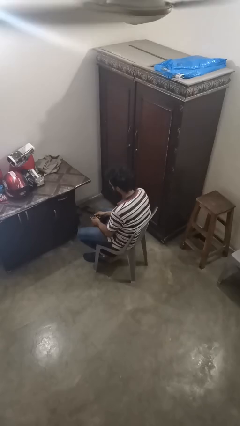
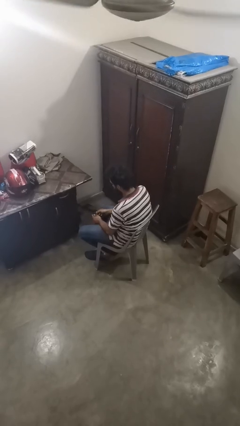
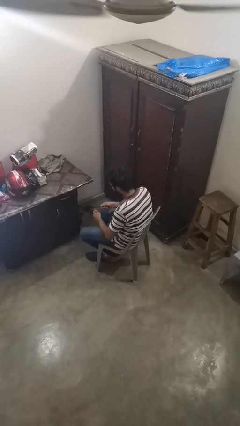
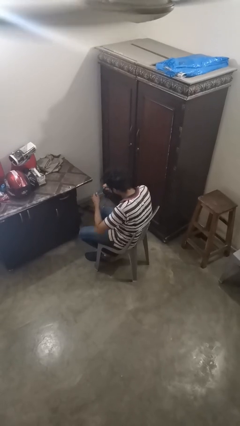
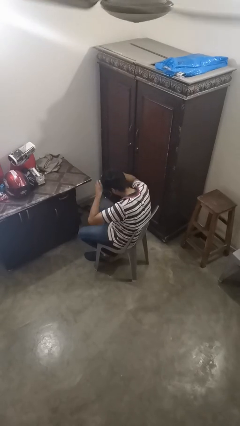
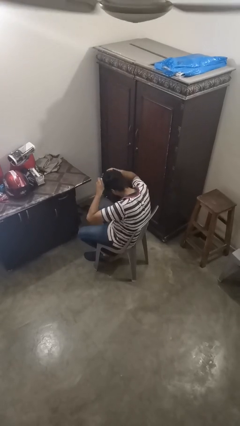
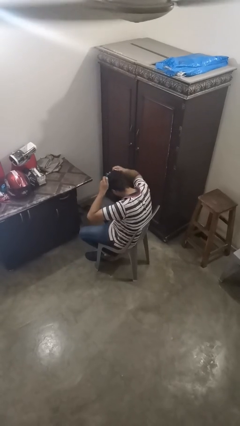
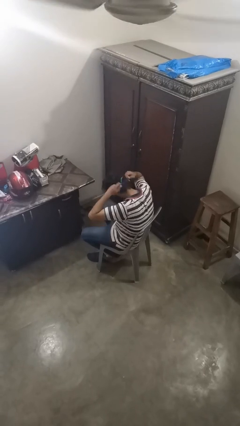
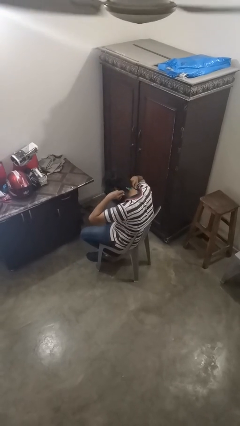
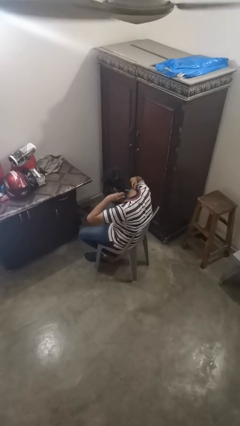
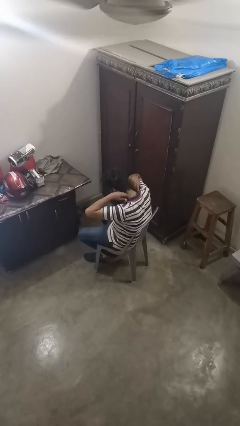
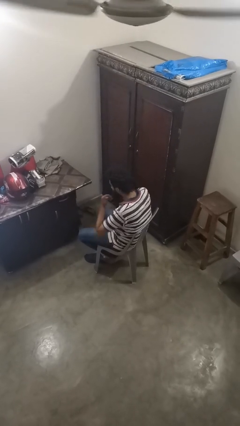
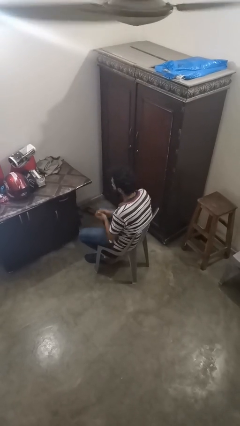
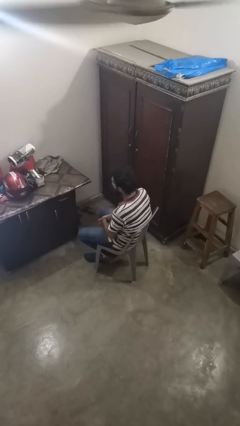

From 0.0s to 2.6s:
person puts on necklace

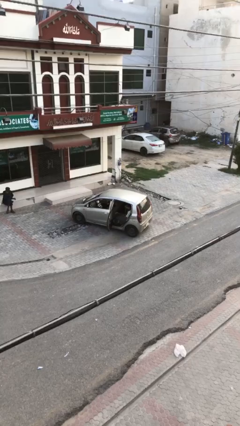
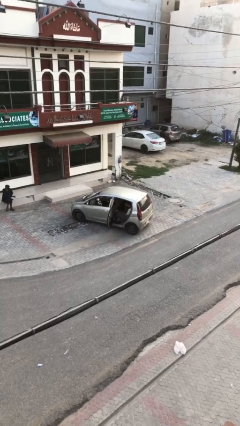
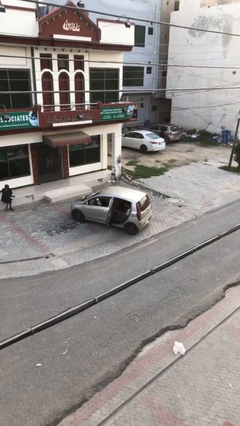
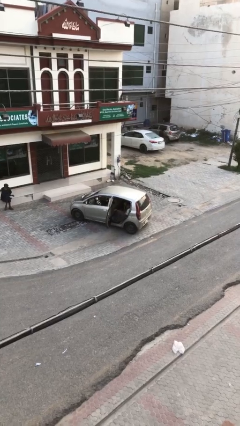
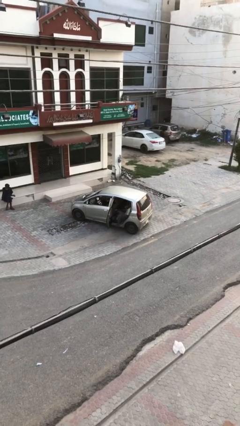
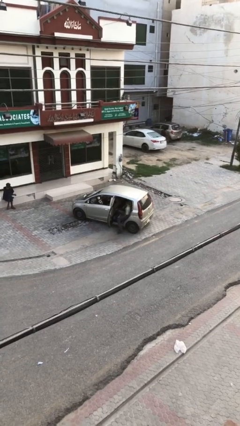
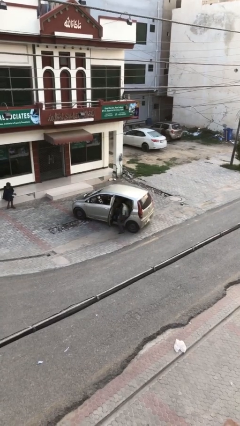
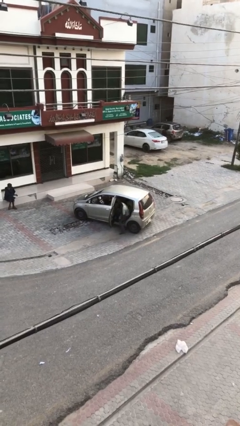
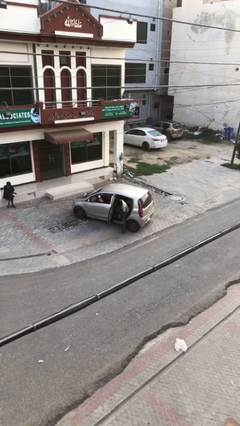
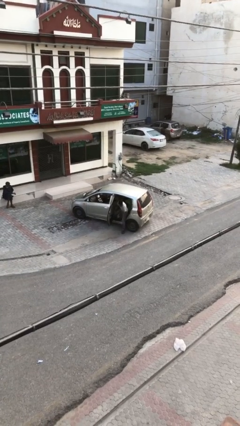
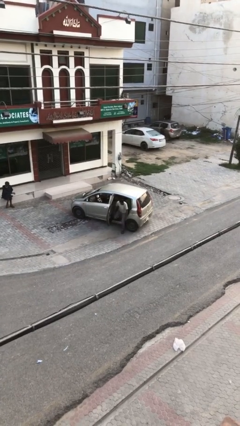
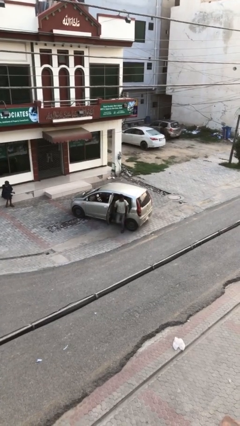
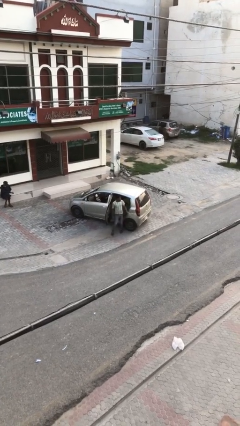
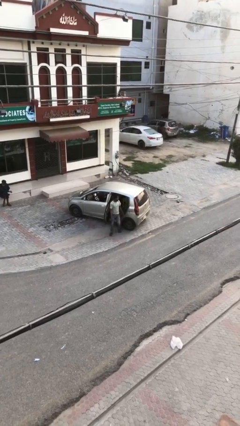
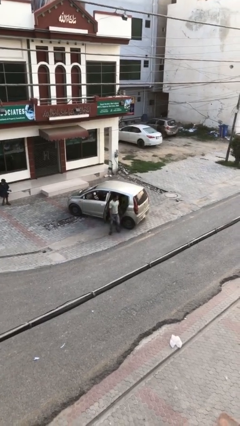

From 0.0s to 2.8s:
person exits car

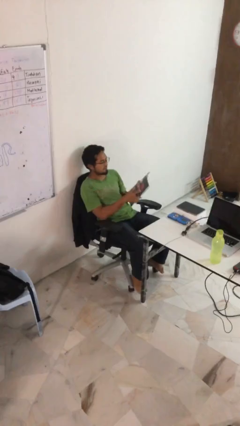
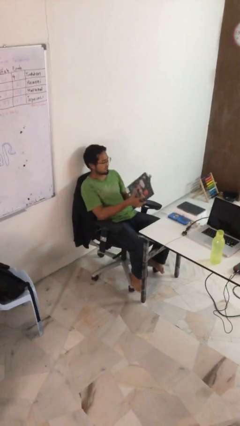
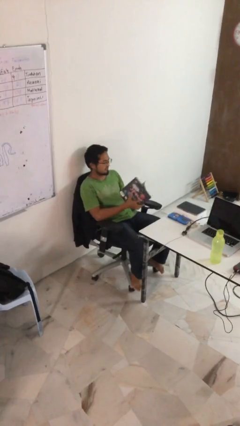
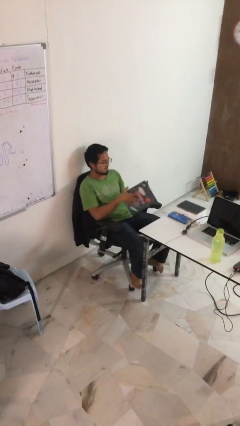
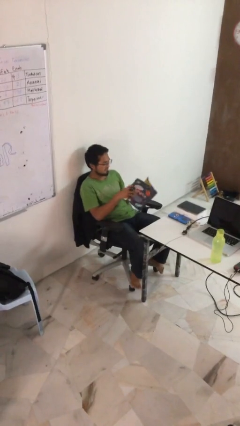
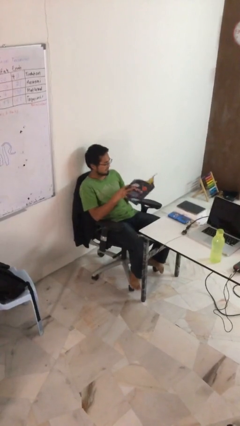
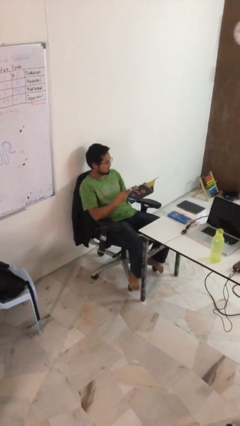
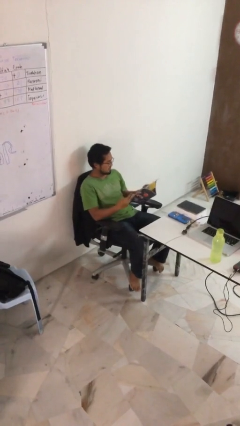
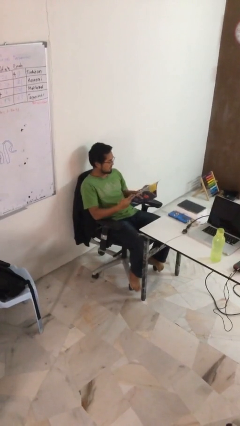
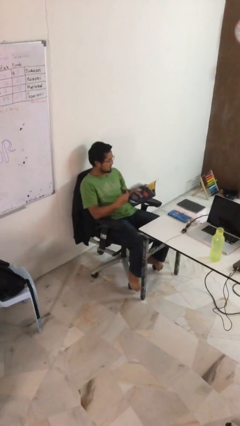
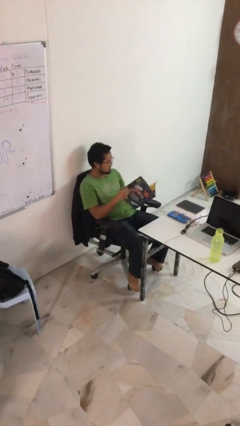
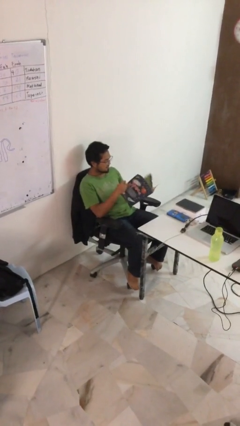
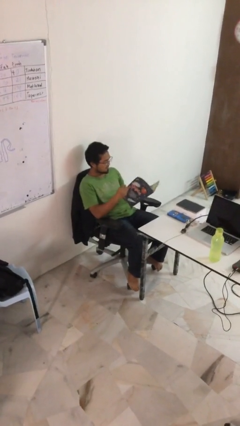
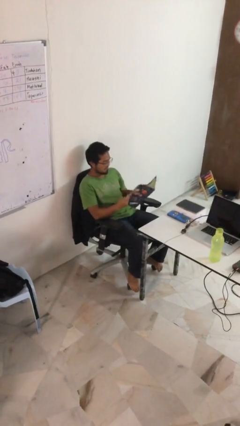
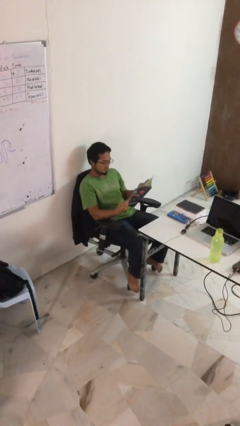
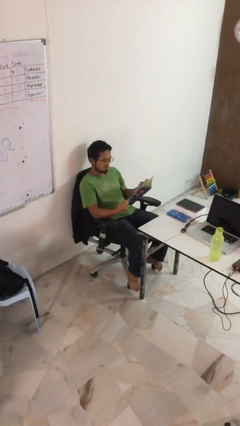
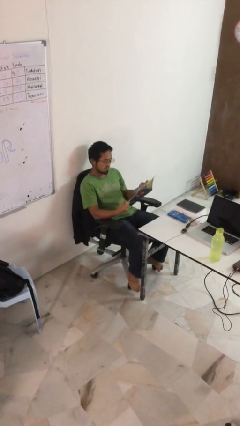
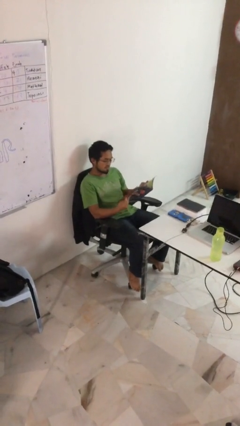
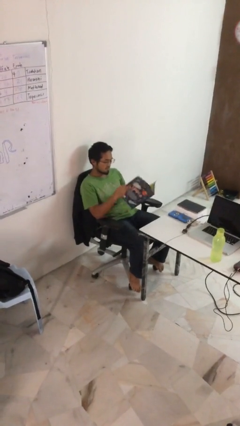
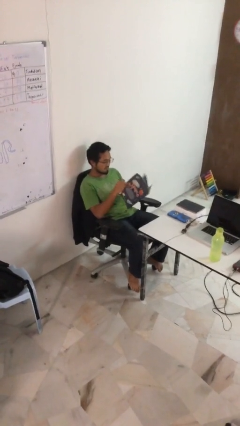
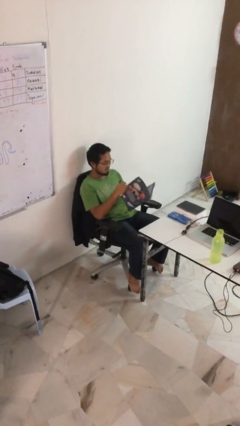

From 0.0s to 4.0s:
person reads document

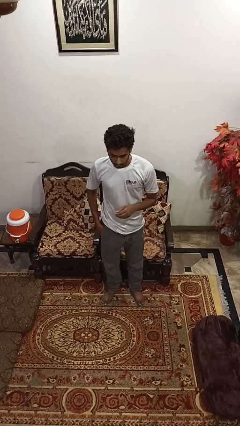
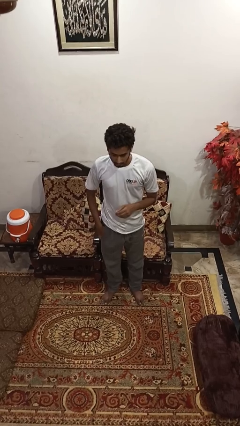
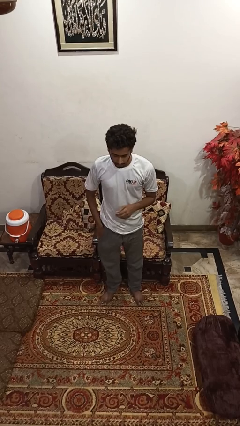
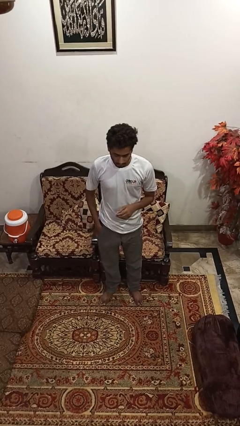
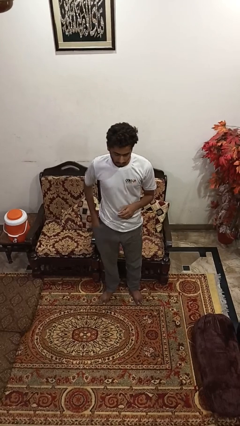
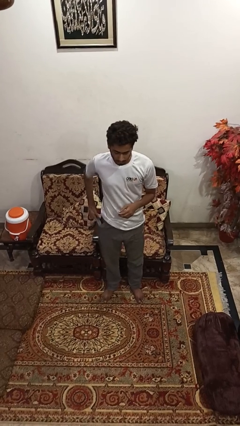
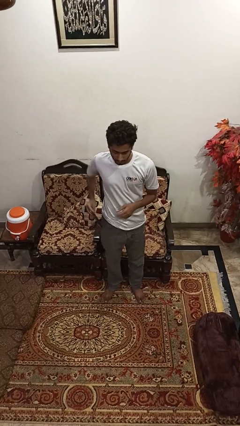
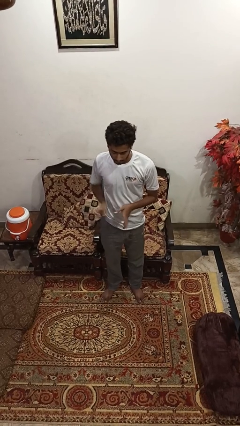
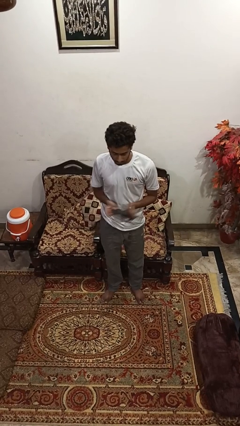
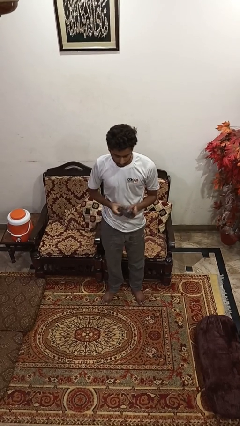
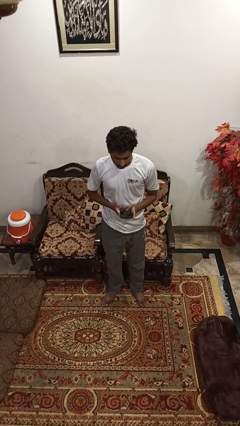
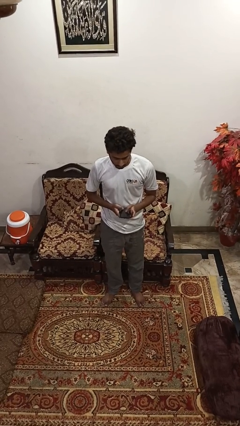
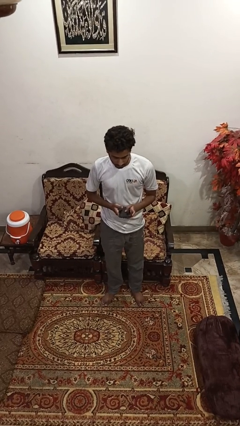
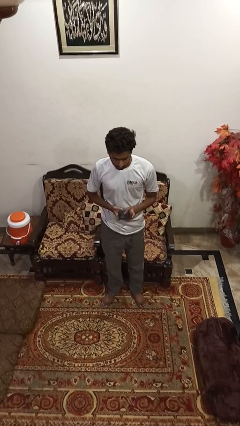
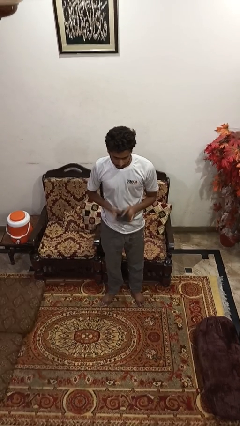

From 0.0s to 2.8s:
person takes phone from pocket

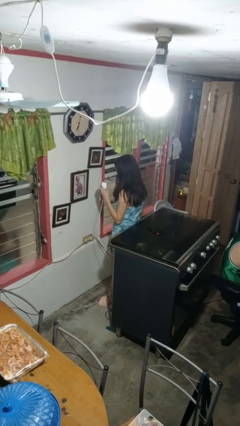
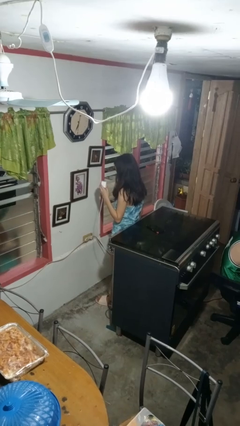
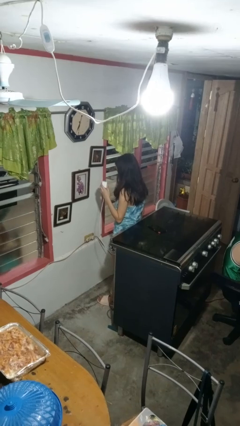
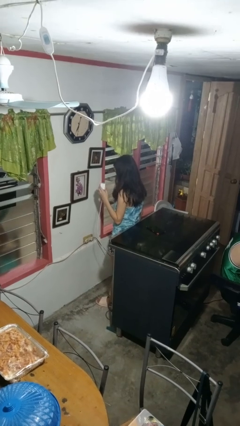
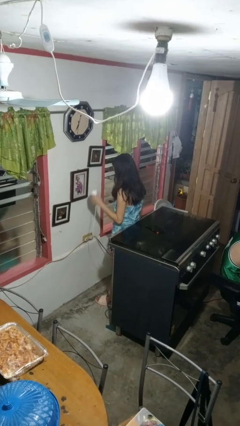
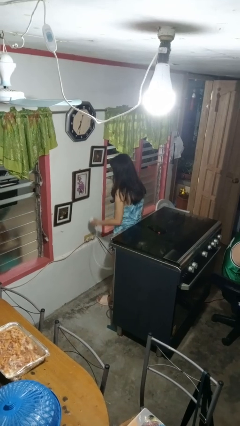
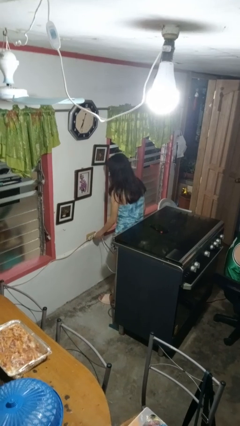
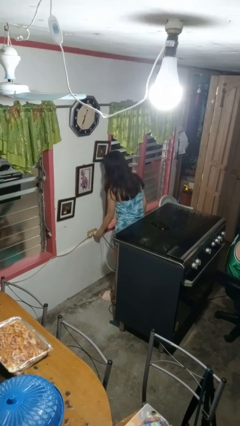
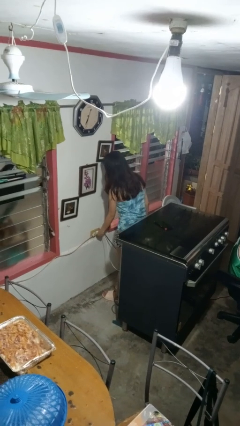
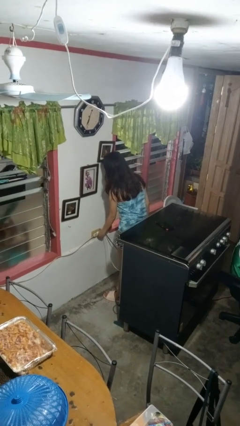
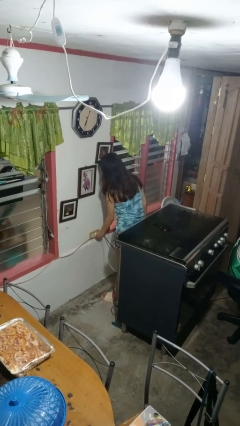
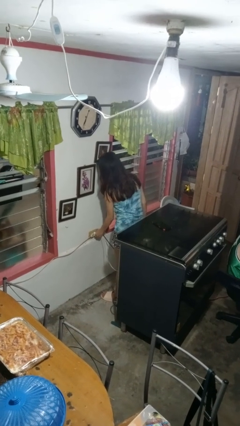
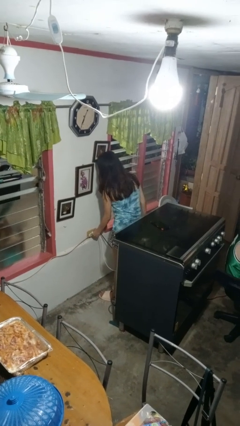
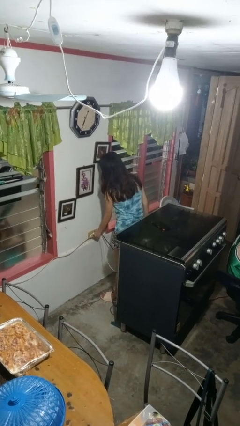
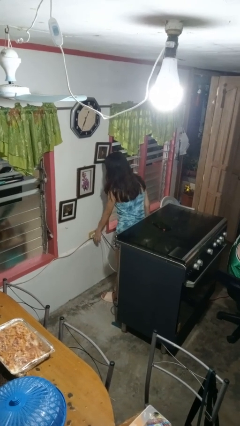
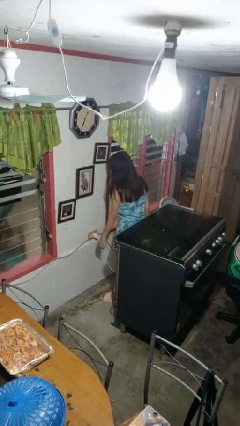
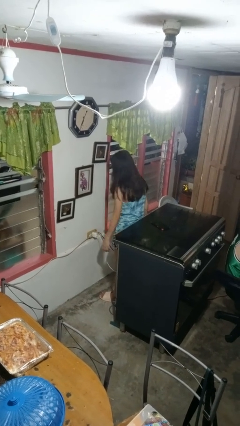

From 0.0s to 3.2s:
person plugs into electrical socket

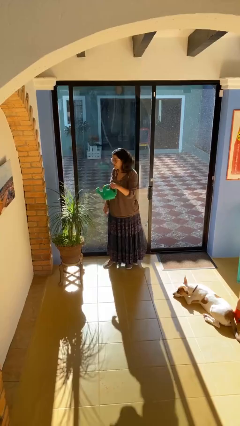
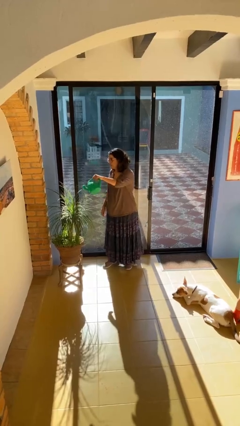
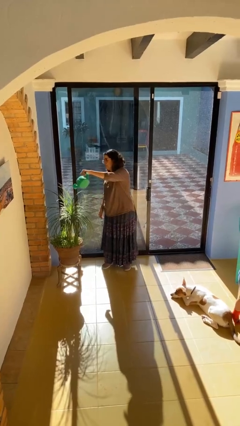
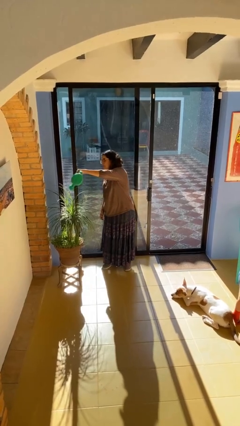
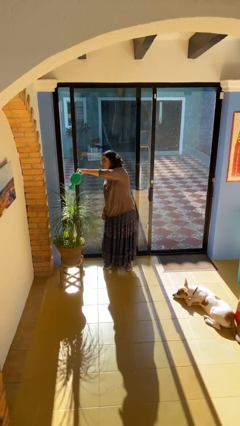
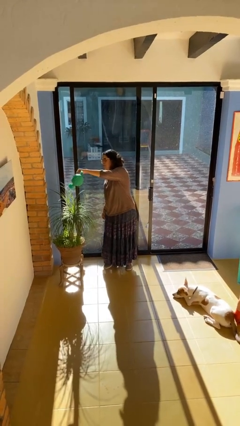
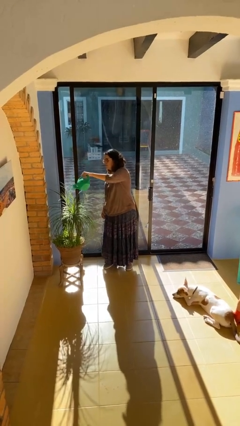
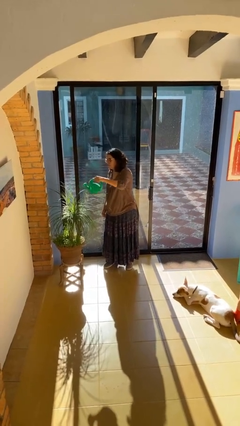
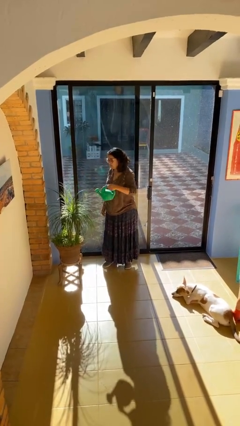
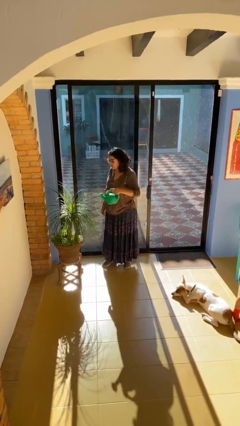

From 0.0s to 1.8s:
person waters houseplant

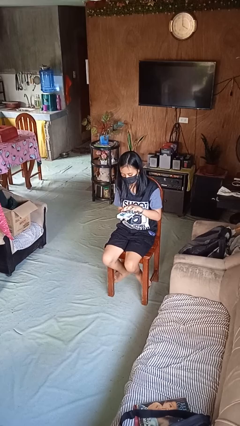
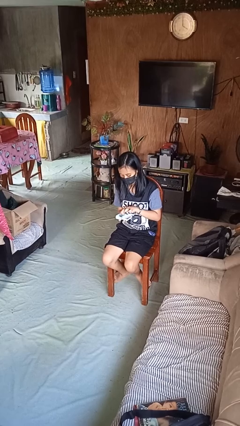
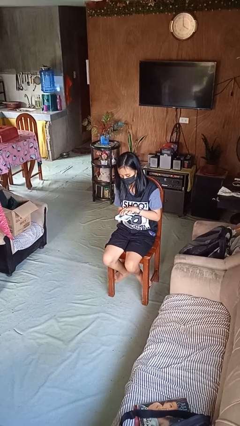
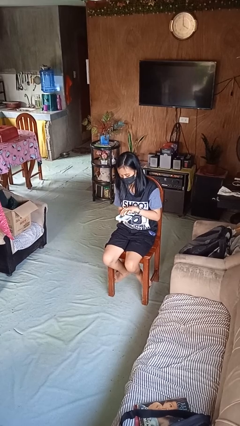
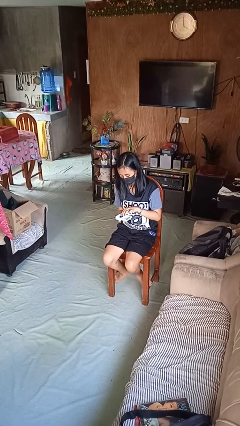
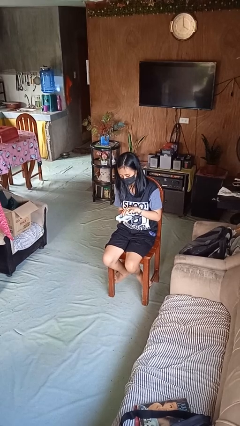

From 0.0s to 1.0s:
person searches jewelry box
